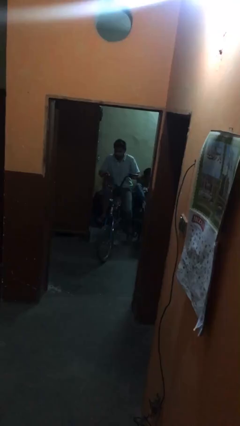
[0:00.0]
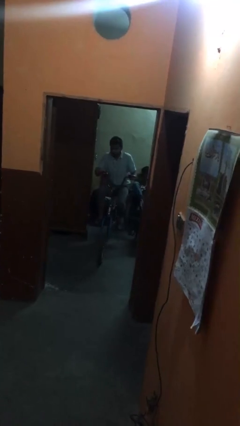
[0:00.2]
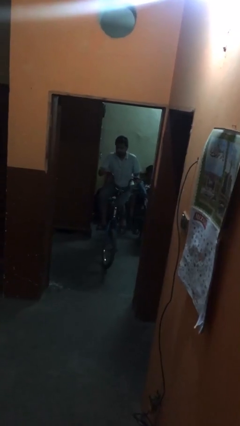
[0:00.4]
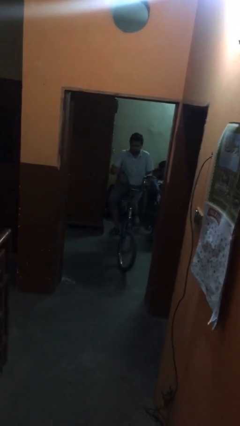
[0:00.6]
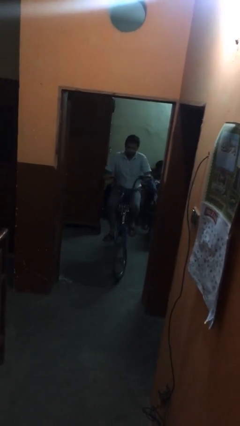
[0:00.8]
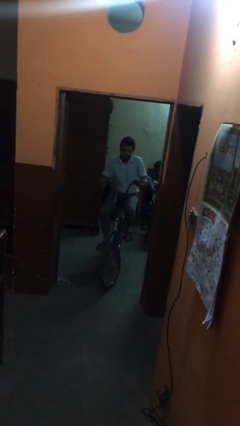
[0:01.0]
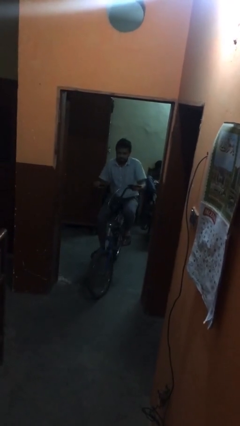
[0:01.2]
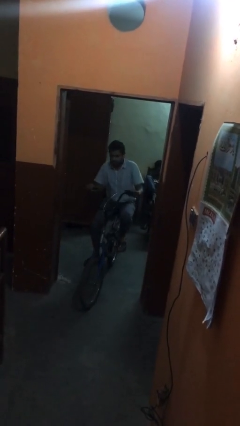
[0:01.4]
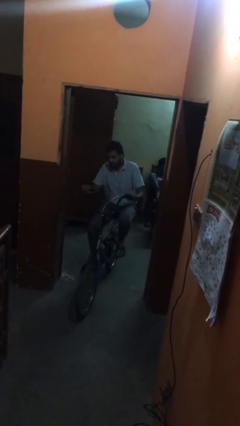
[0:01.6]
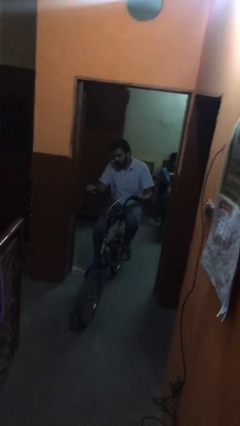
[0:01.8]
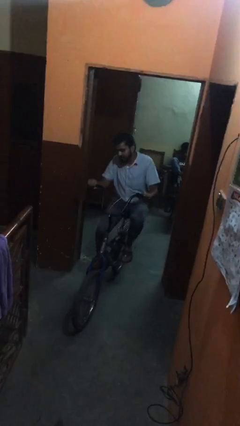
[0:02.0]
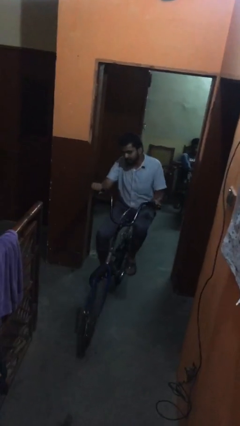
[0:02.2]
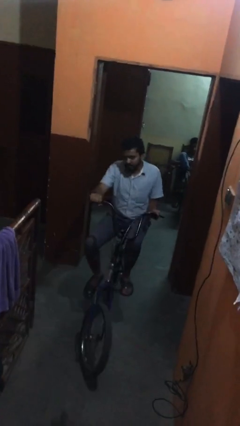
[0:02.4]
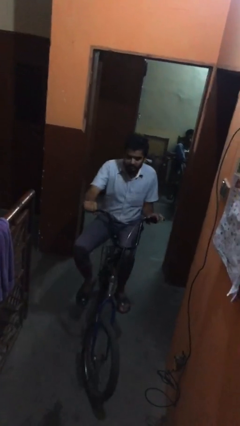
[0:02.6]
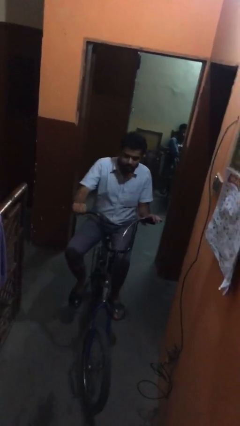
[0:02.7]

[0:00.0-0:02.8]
person rides bicycle

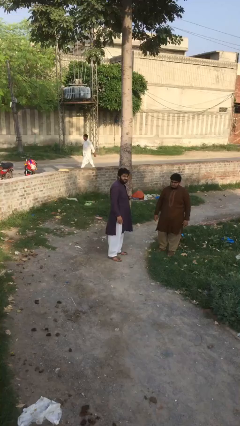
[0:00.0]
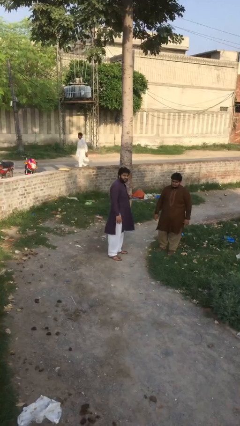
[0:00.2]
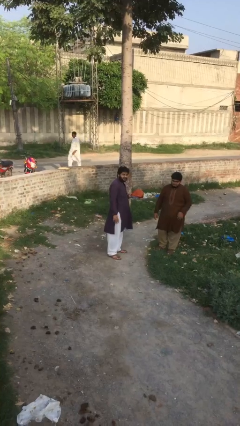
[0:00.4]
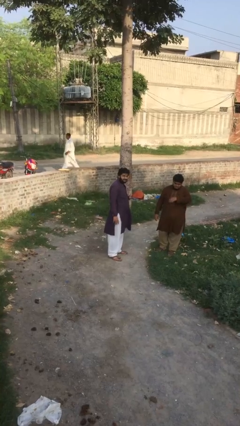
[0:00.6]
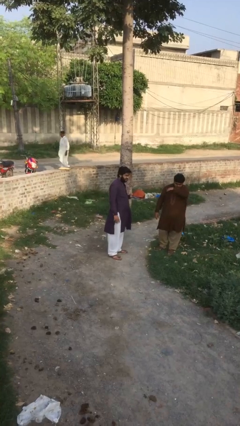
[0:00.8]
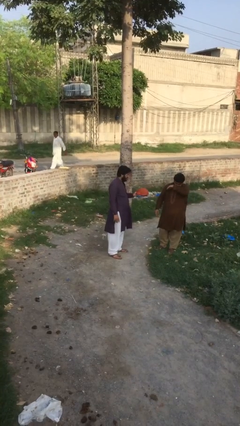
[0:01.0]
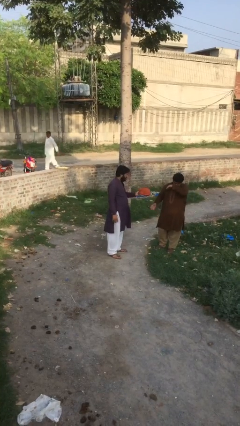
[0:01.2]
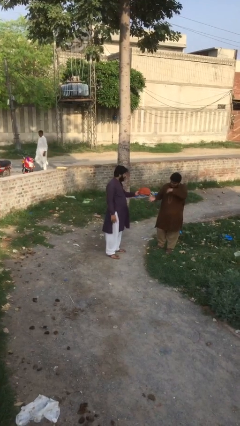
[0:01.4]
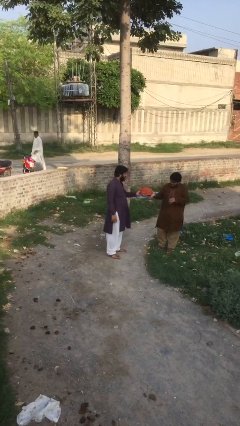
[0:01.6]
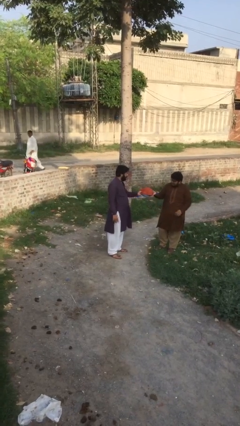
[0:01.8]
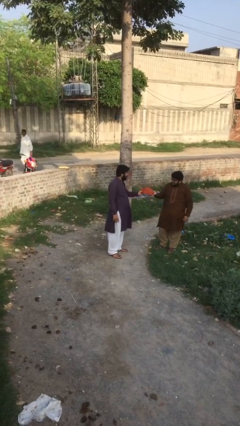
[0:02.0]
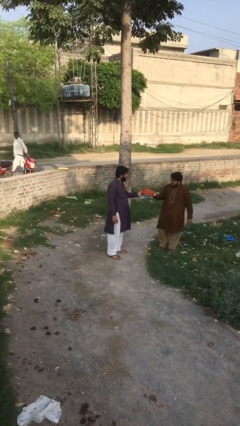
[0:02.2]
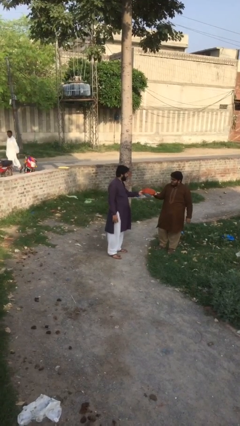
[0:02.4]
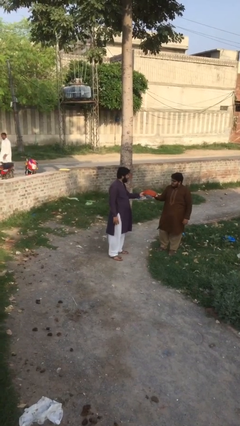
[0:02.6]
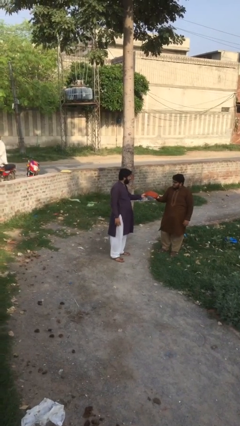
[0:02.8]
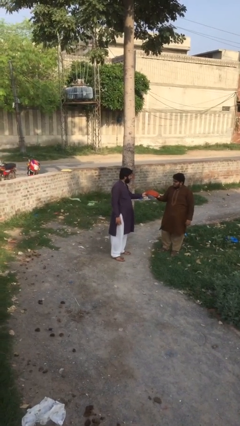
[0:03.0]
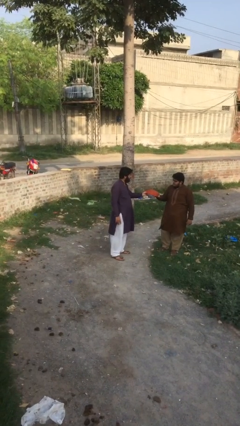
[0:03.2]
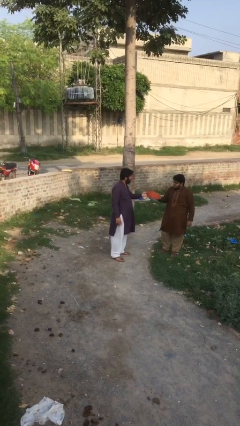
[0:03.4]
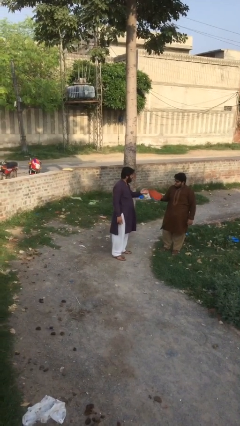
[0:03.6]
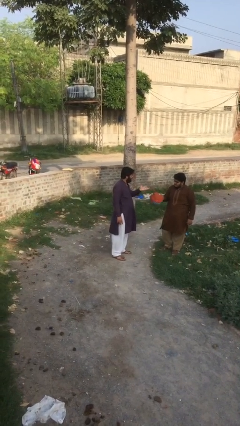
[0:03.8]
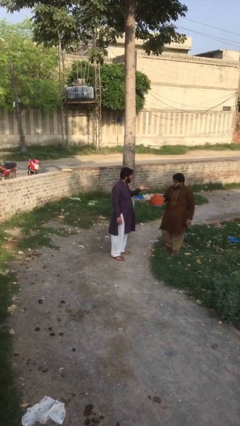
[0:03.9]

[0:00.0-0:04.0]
person transfers object to person

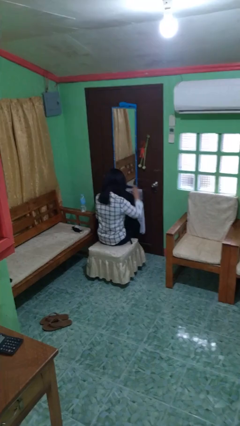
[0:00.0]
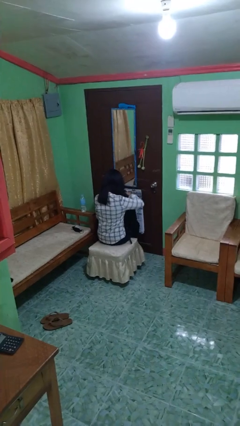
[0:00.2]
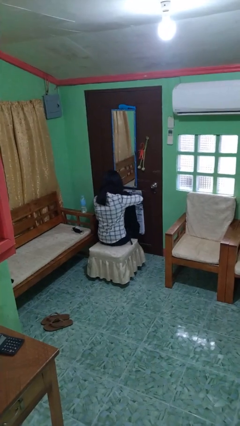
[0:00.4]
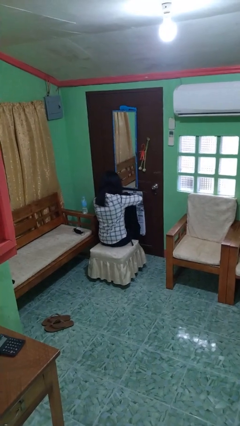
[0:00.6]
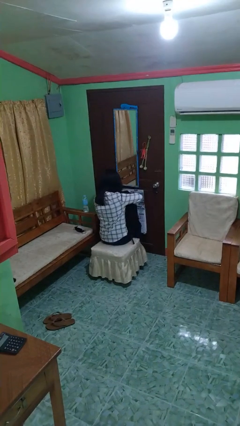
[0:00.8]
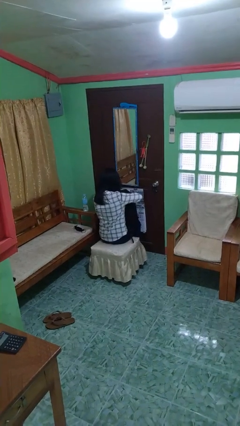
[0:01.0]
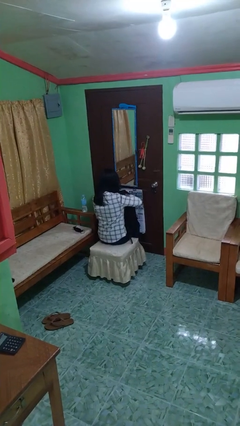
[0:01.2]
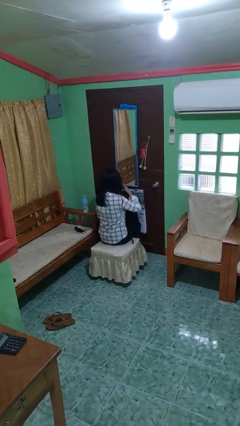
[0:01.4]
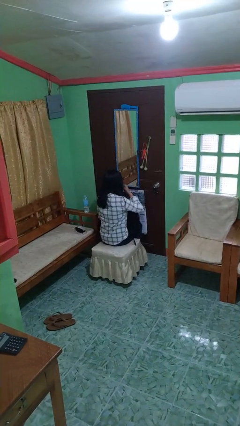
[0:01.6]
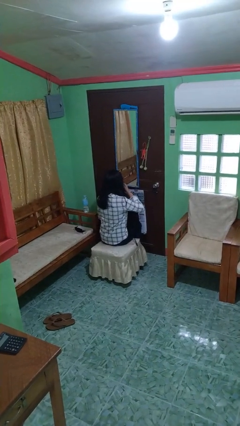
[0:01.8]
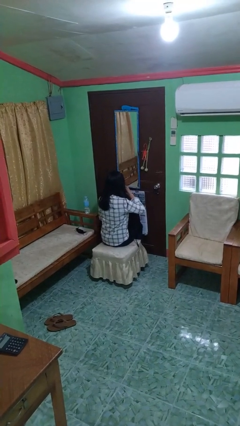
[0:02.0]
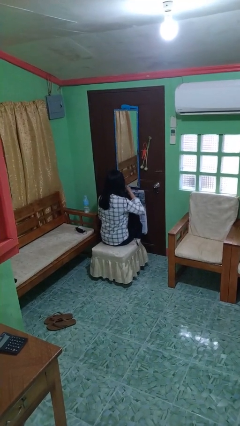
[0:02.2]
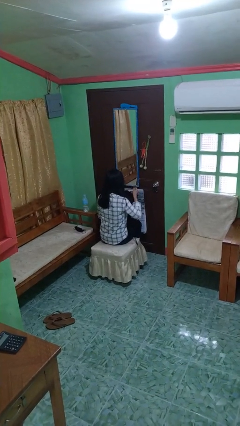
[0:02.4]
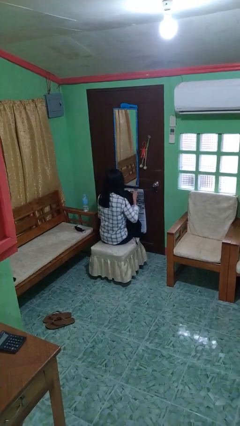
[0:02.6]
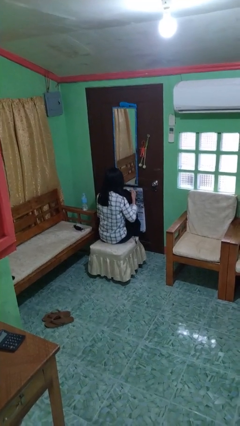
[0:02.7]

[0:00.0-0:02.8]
person eats snack from bag

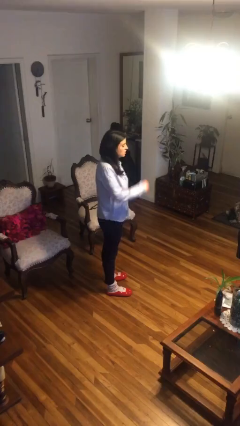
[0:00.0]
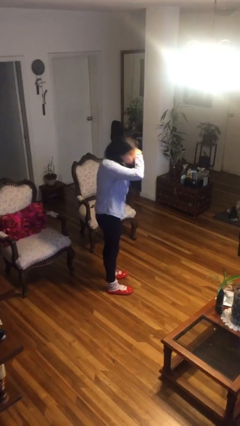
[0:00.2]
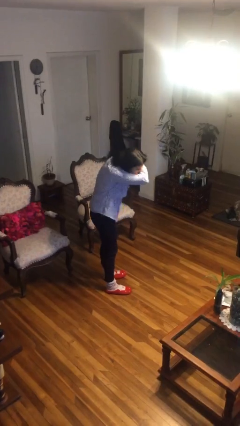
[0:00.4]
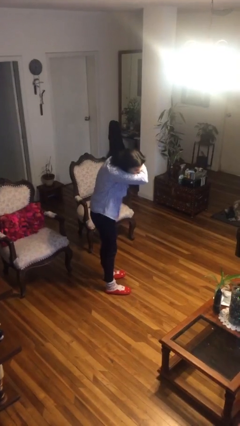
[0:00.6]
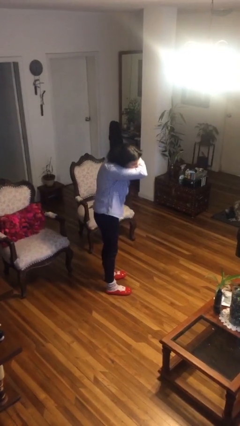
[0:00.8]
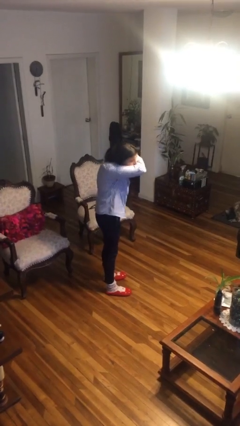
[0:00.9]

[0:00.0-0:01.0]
person sneezes into arm

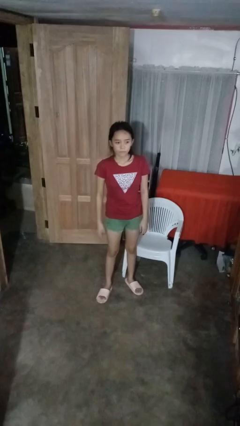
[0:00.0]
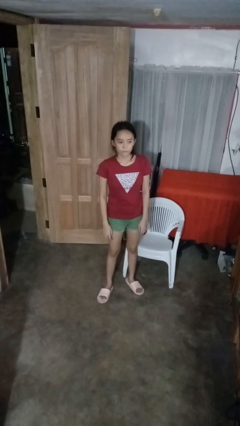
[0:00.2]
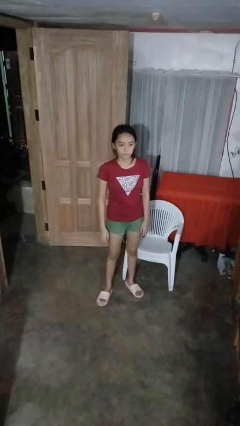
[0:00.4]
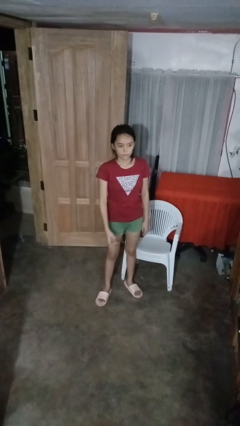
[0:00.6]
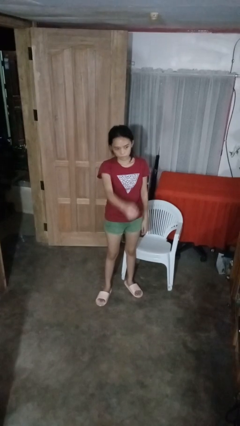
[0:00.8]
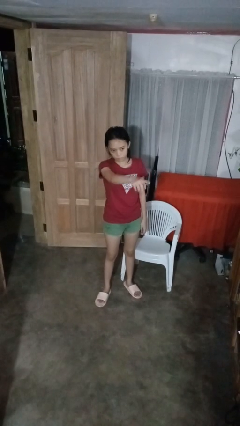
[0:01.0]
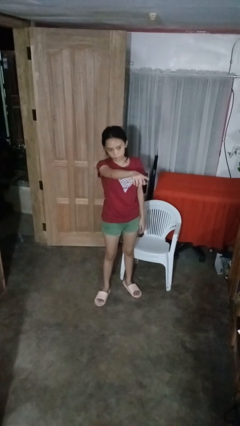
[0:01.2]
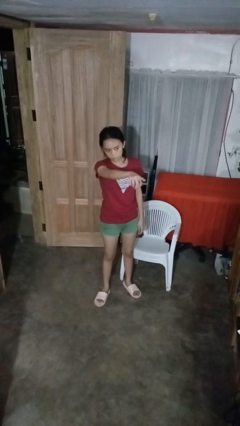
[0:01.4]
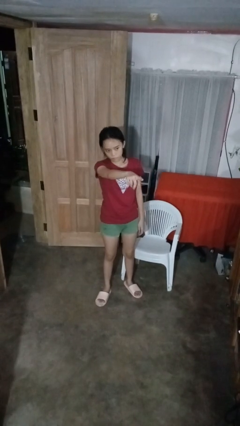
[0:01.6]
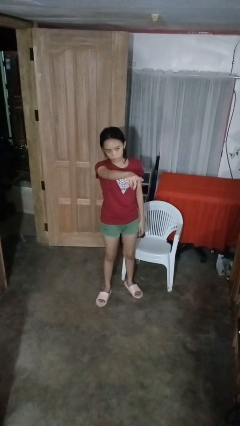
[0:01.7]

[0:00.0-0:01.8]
person points at person

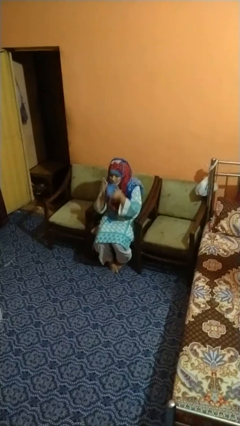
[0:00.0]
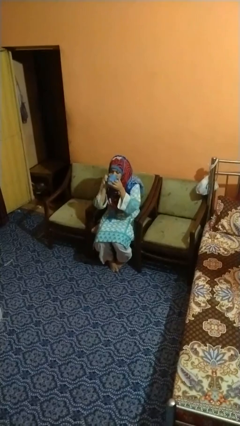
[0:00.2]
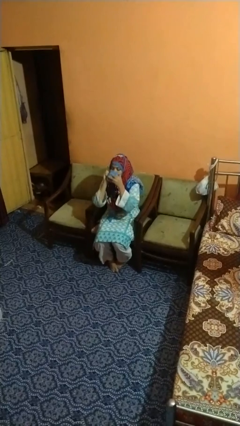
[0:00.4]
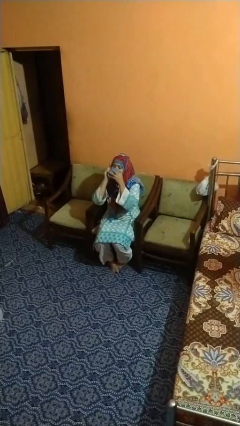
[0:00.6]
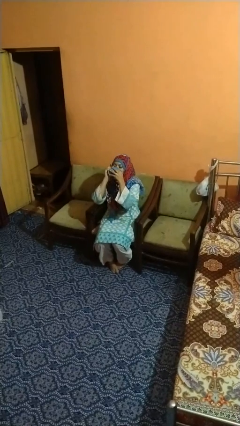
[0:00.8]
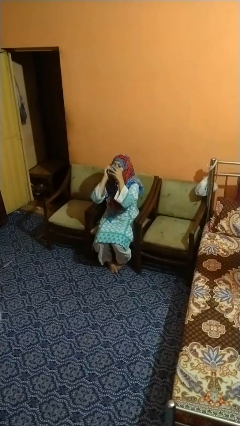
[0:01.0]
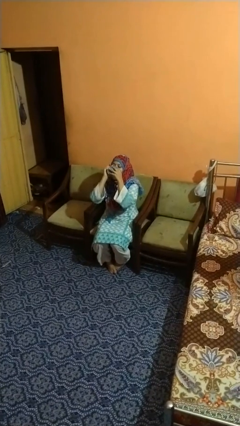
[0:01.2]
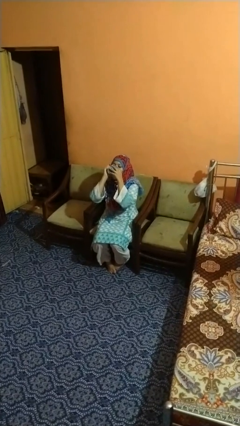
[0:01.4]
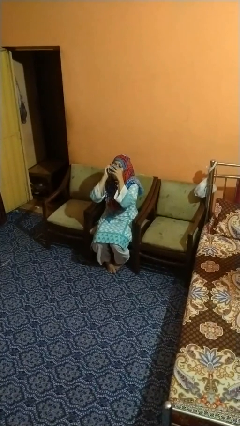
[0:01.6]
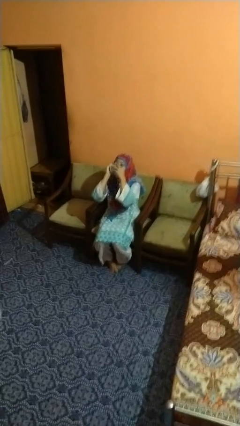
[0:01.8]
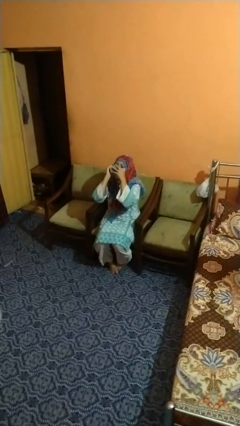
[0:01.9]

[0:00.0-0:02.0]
person drinks from mug

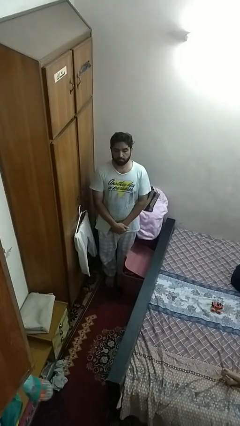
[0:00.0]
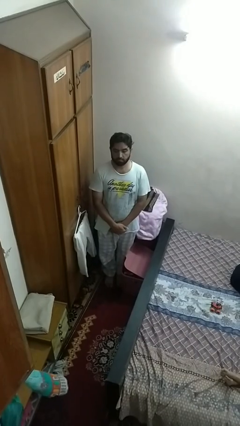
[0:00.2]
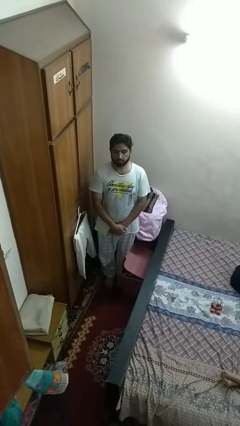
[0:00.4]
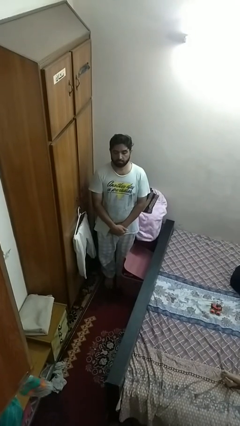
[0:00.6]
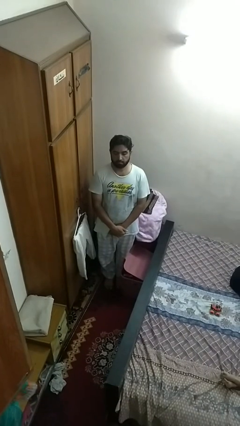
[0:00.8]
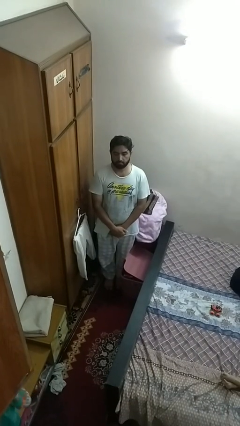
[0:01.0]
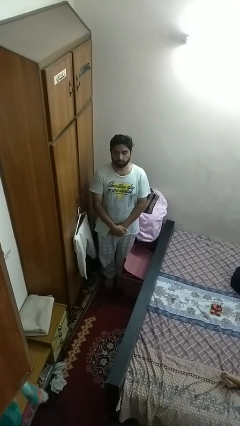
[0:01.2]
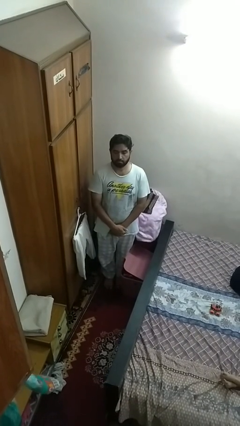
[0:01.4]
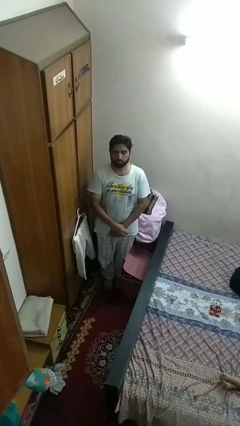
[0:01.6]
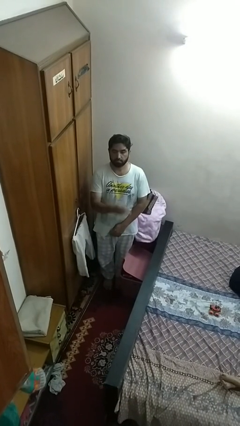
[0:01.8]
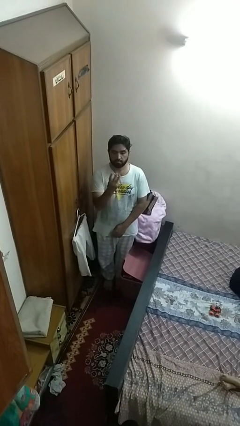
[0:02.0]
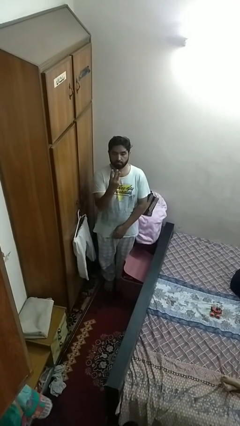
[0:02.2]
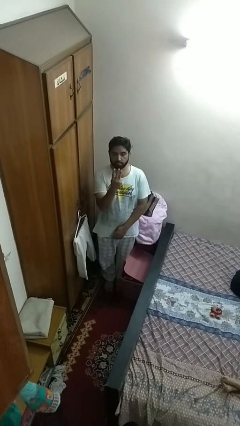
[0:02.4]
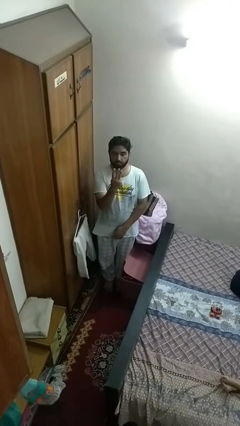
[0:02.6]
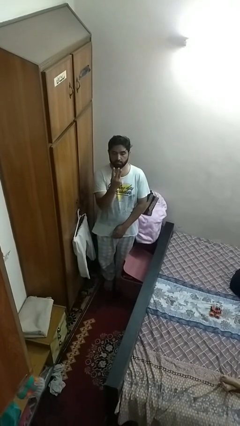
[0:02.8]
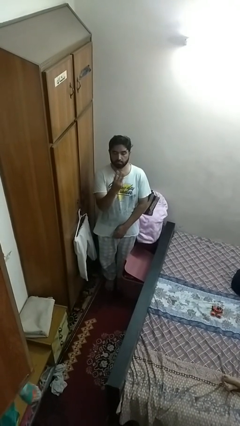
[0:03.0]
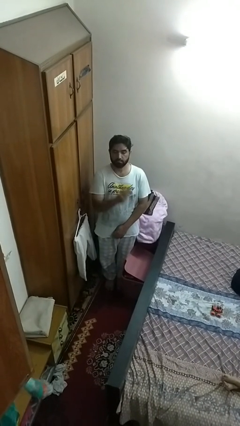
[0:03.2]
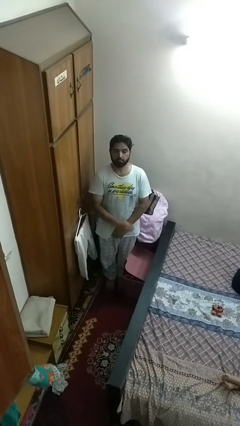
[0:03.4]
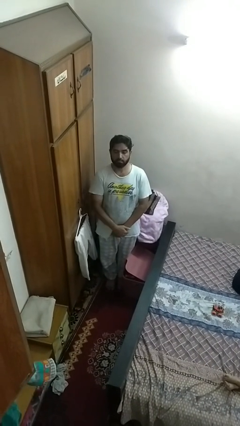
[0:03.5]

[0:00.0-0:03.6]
person gestures number three
